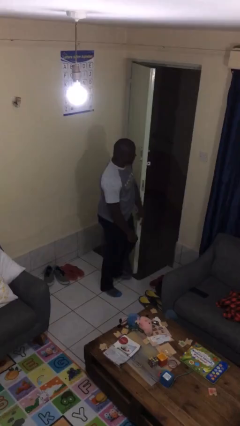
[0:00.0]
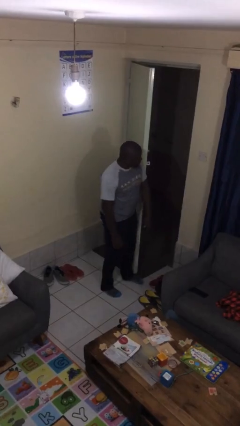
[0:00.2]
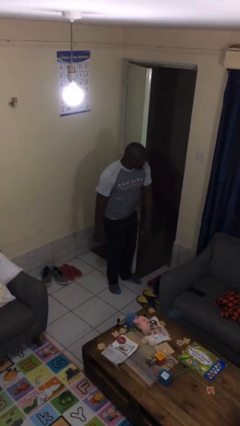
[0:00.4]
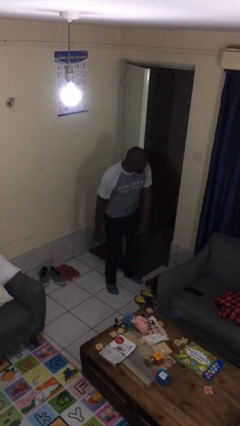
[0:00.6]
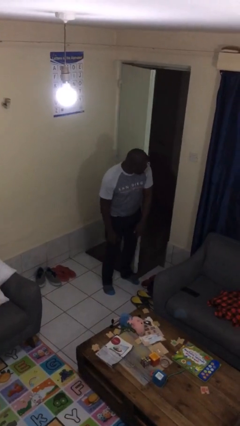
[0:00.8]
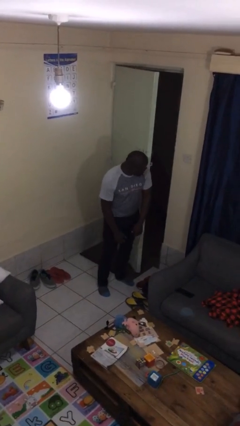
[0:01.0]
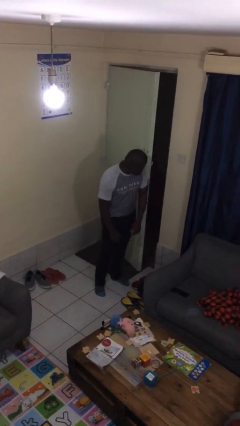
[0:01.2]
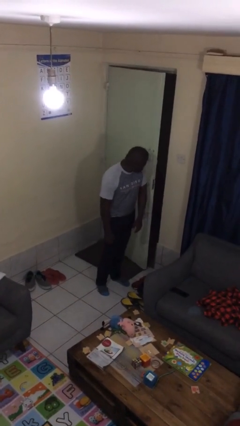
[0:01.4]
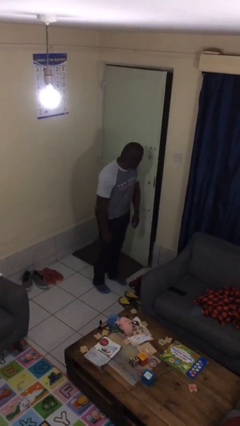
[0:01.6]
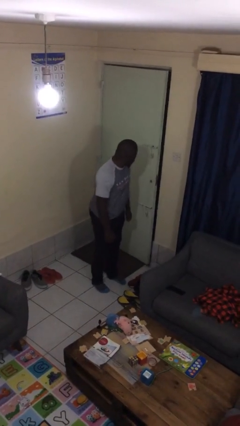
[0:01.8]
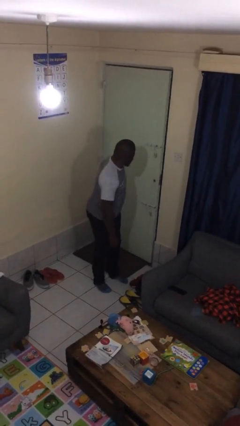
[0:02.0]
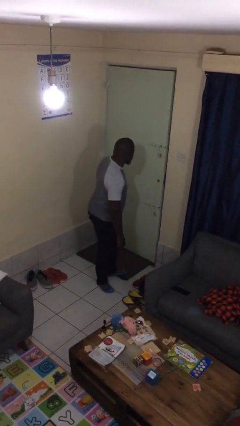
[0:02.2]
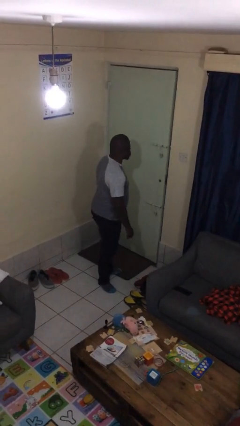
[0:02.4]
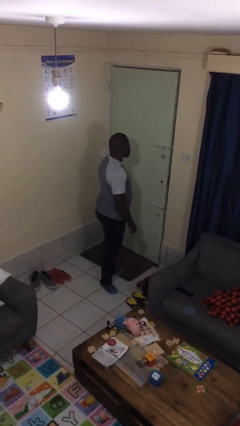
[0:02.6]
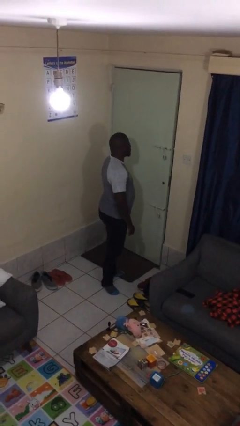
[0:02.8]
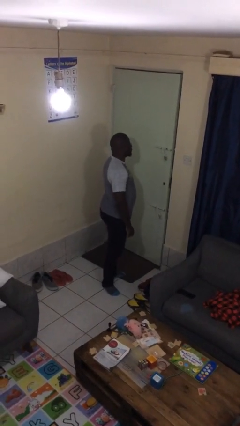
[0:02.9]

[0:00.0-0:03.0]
person closes door with hip

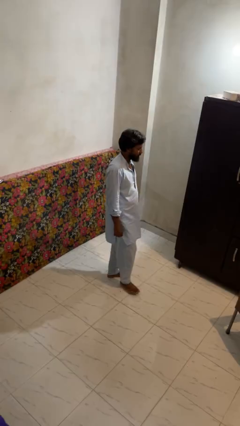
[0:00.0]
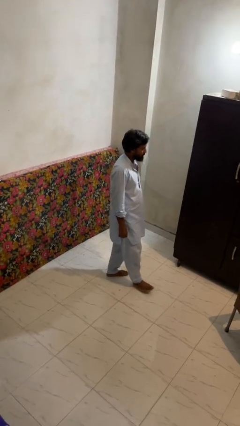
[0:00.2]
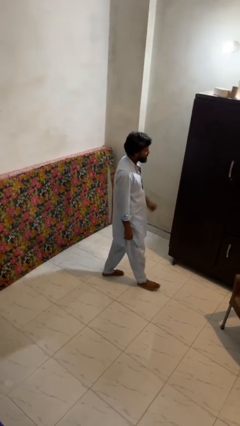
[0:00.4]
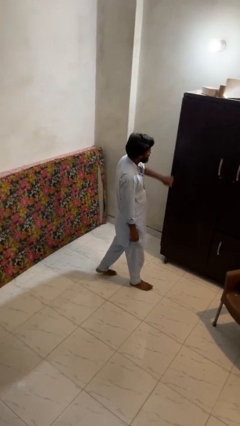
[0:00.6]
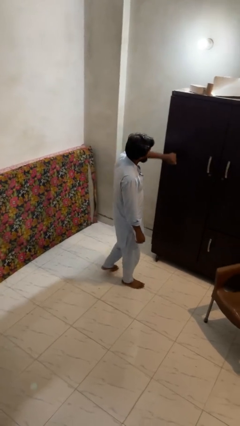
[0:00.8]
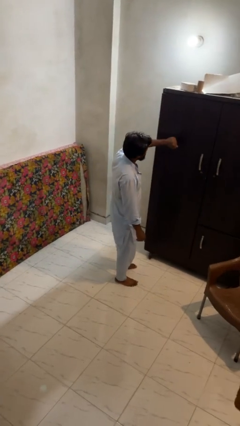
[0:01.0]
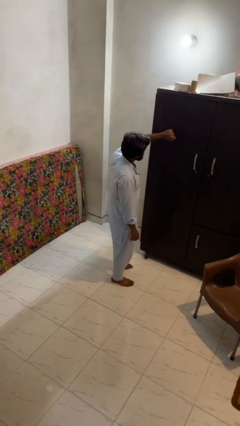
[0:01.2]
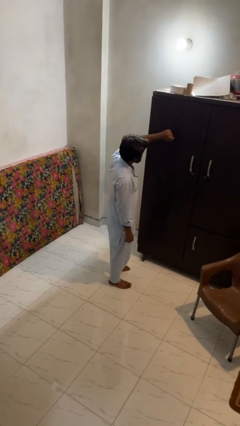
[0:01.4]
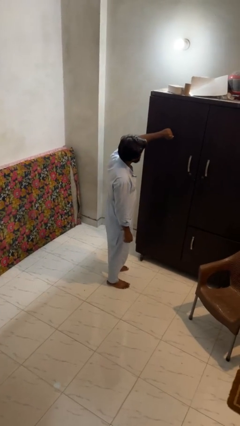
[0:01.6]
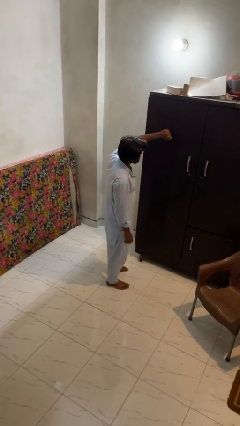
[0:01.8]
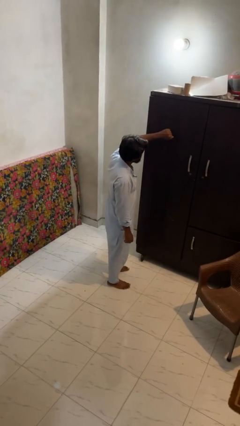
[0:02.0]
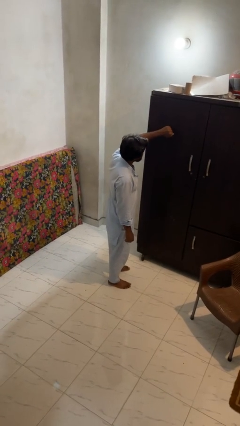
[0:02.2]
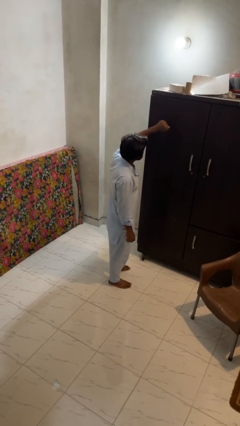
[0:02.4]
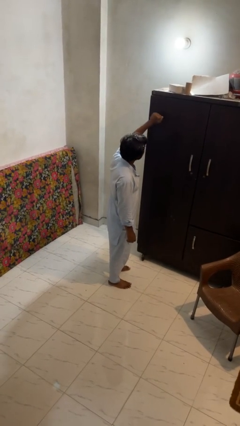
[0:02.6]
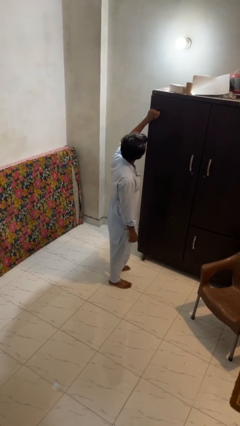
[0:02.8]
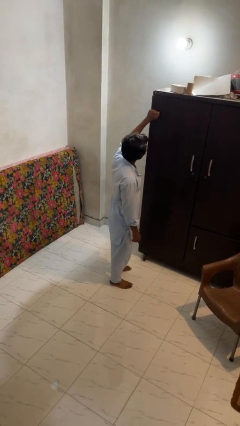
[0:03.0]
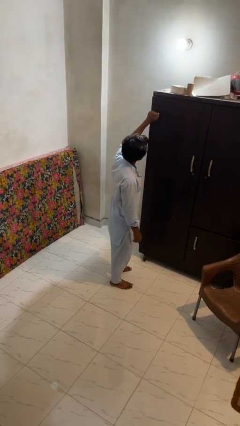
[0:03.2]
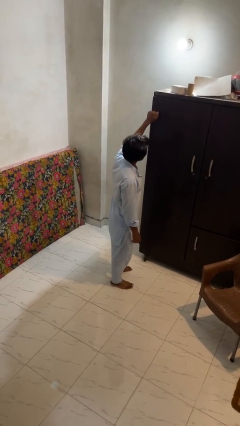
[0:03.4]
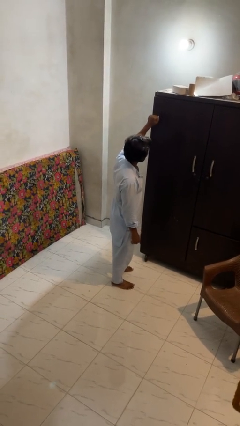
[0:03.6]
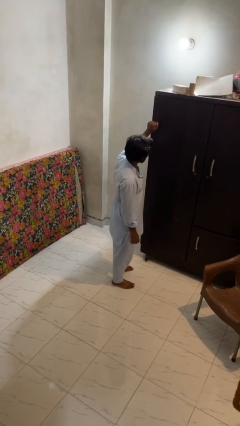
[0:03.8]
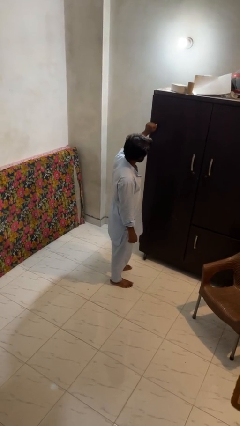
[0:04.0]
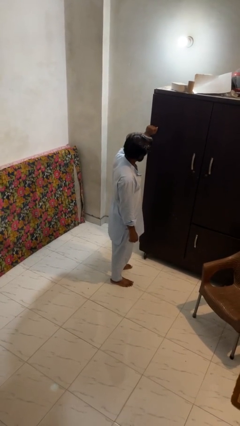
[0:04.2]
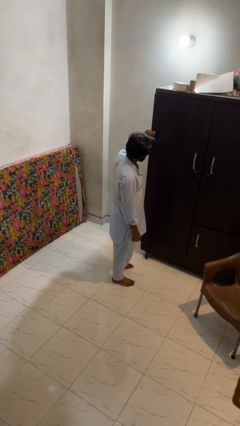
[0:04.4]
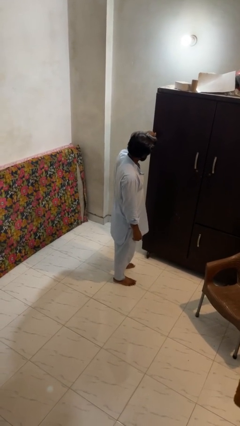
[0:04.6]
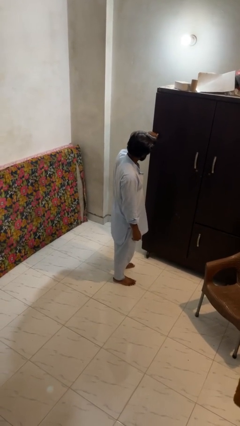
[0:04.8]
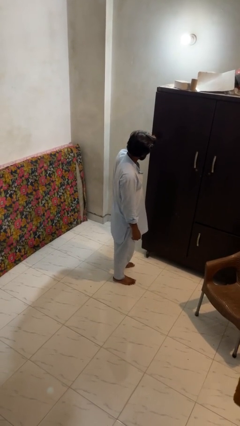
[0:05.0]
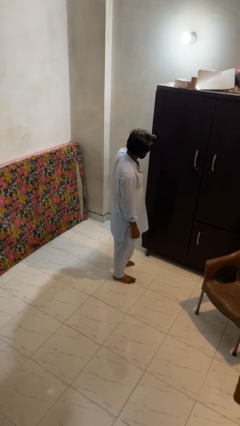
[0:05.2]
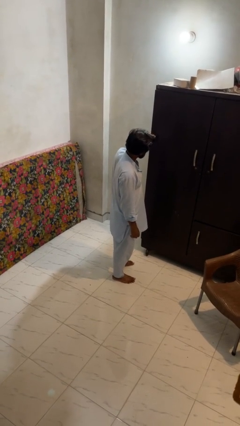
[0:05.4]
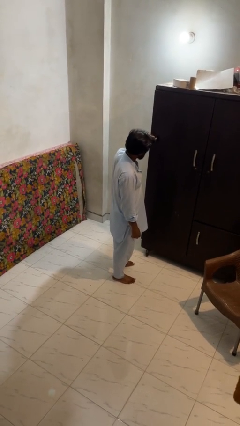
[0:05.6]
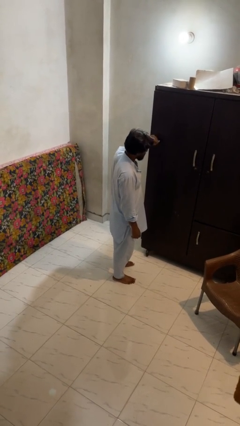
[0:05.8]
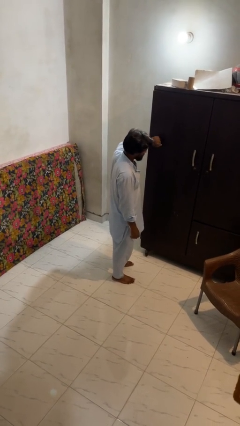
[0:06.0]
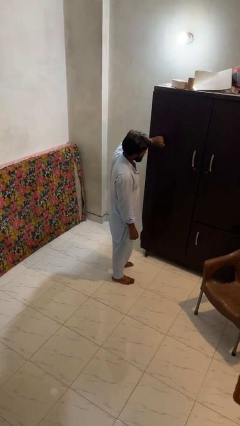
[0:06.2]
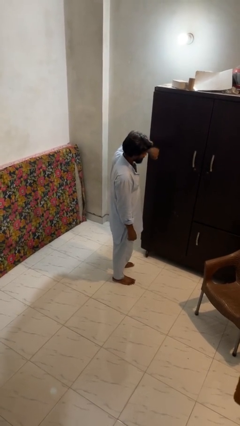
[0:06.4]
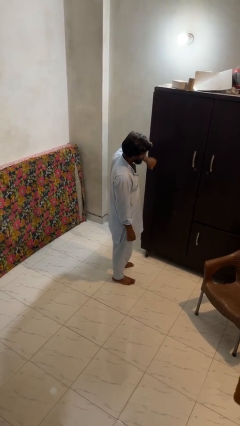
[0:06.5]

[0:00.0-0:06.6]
person taps object with finger

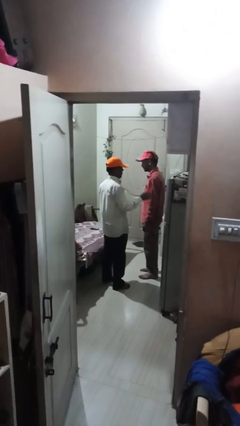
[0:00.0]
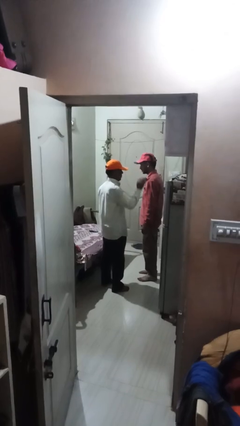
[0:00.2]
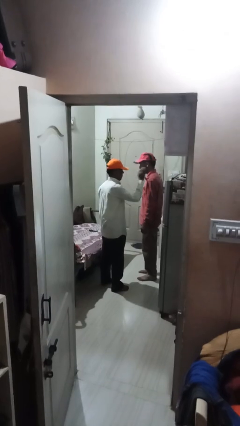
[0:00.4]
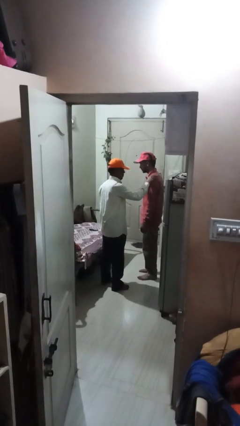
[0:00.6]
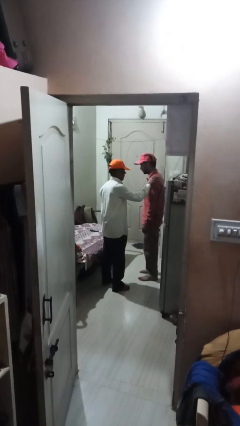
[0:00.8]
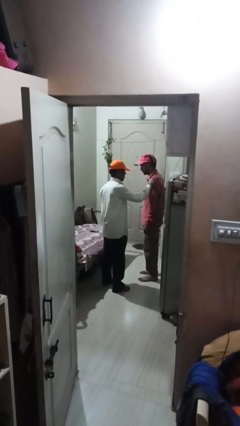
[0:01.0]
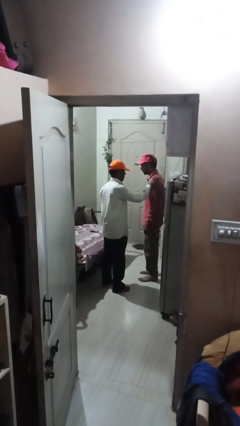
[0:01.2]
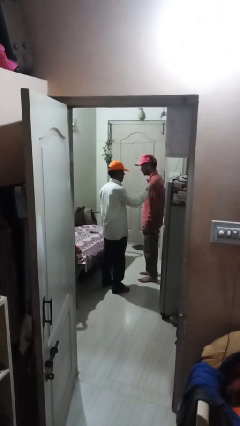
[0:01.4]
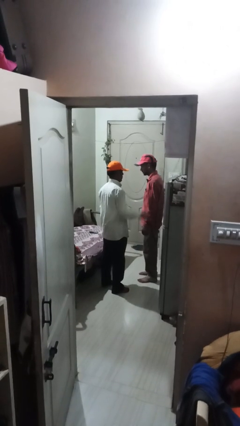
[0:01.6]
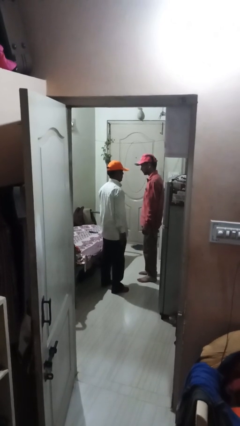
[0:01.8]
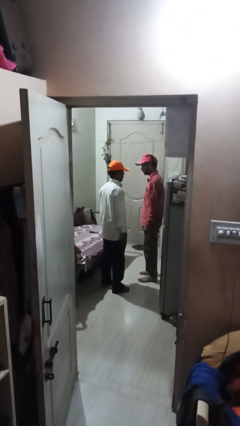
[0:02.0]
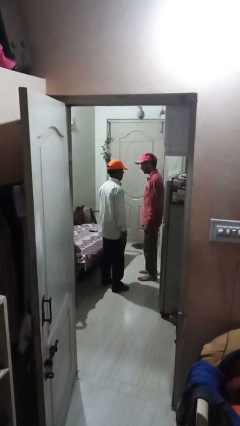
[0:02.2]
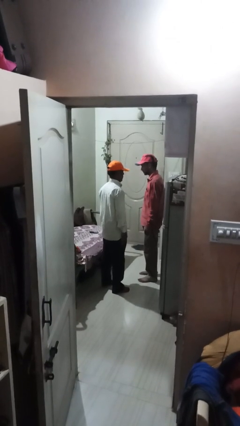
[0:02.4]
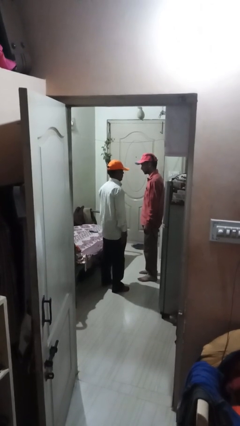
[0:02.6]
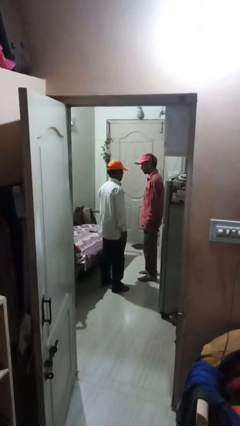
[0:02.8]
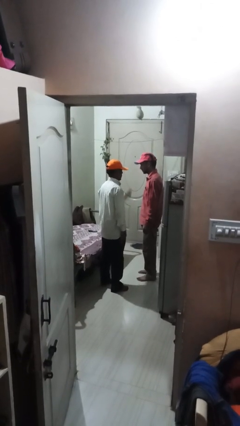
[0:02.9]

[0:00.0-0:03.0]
person pounds shoulders of person

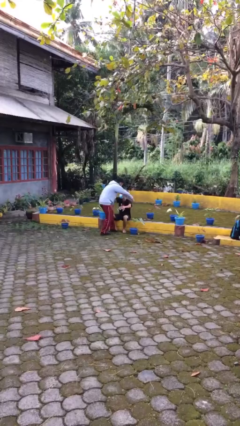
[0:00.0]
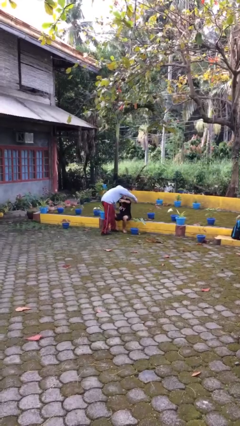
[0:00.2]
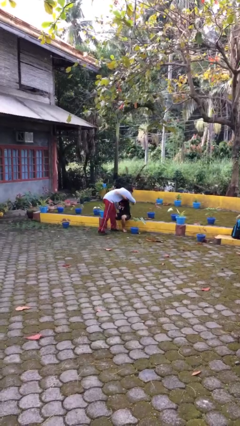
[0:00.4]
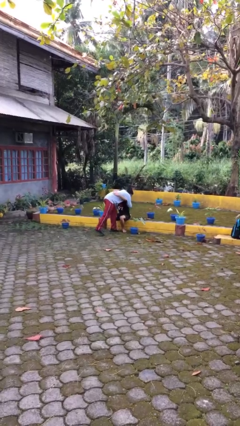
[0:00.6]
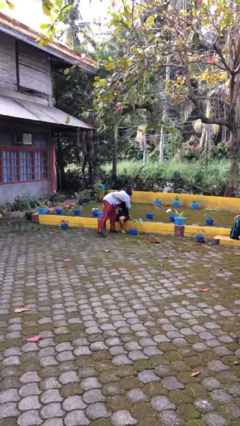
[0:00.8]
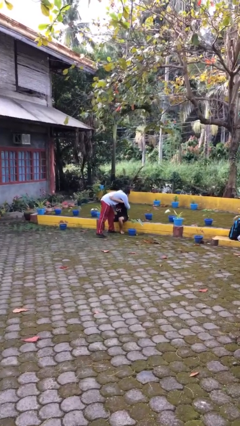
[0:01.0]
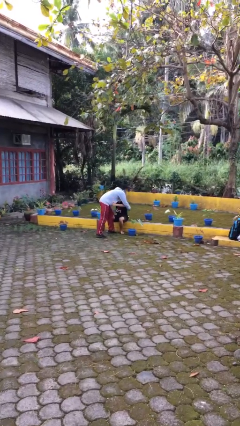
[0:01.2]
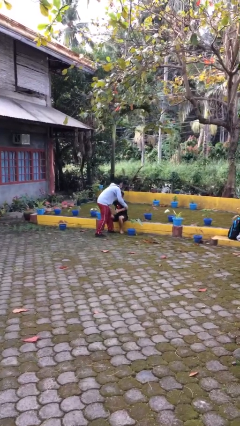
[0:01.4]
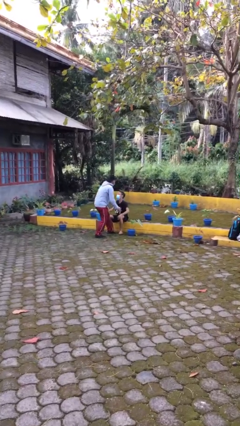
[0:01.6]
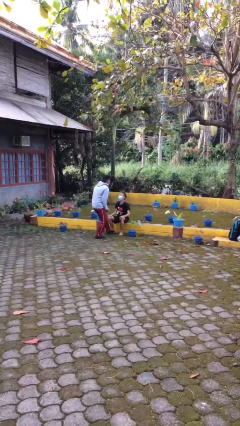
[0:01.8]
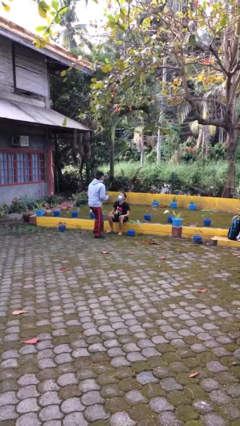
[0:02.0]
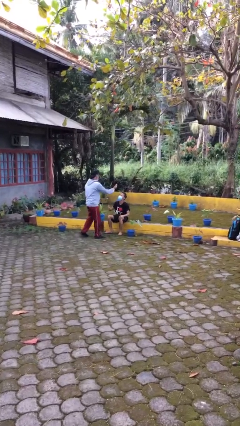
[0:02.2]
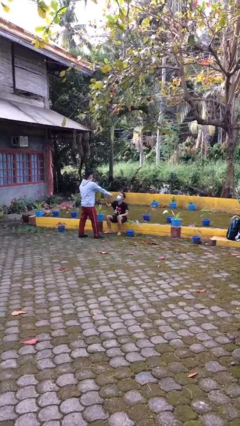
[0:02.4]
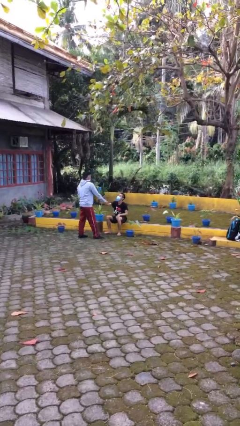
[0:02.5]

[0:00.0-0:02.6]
person embraces person

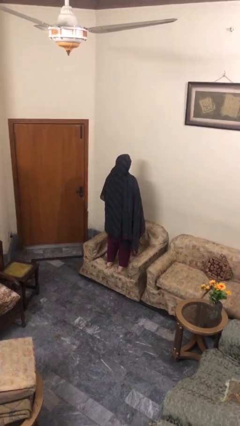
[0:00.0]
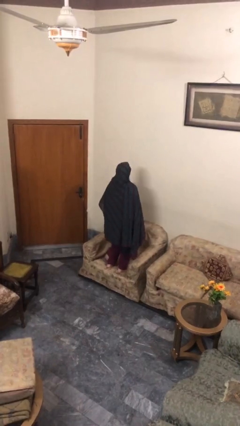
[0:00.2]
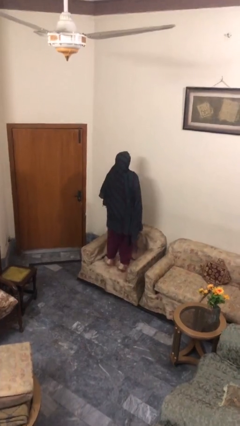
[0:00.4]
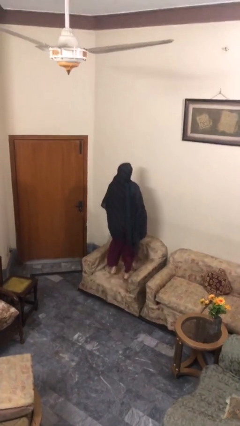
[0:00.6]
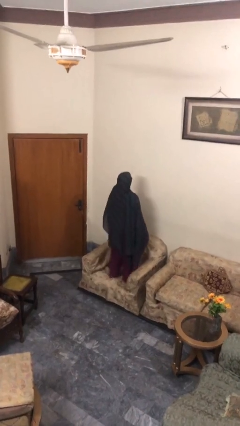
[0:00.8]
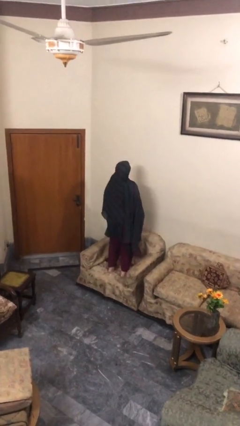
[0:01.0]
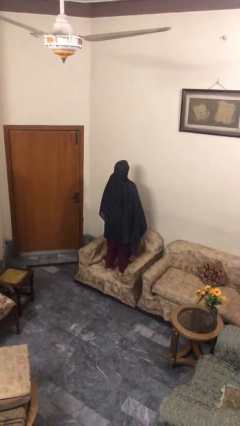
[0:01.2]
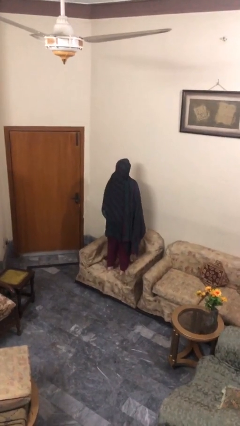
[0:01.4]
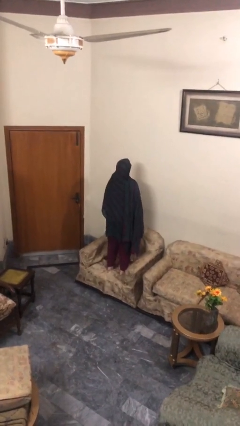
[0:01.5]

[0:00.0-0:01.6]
person jumps on couch

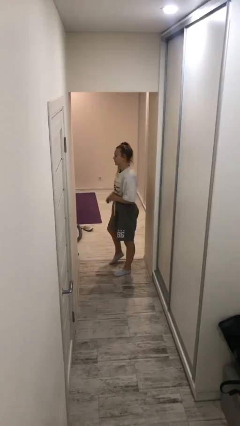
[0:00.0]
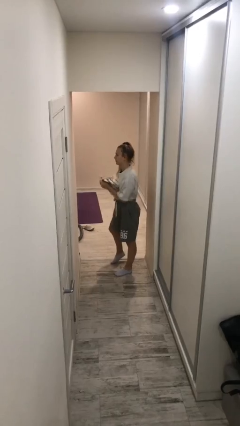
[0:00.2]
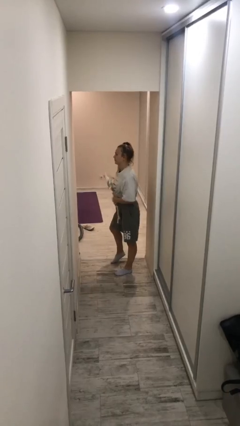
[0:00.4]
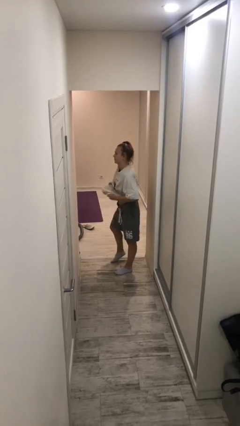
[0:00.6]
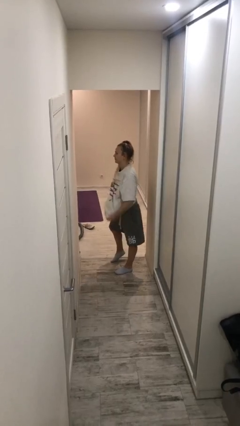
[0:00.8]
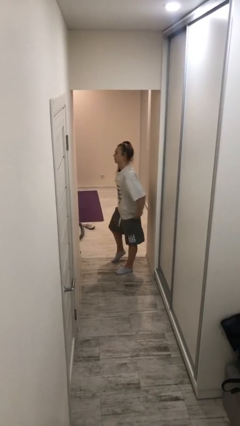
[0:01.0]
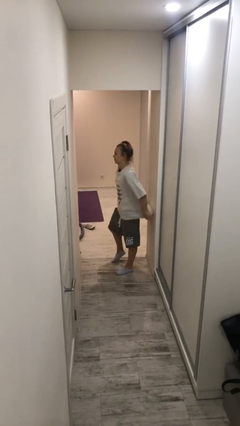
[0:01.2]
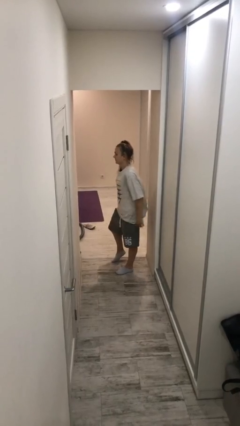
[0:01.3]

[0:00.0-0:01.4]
person untucks shirt
